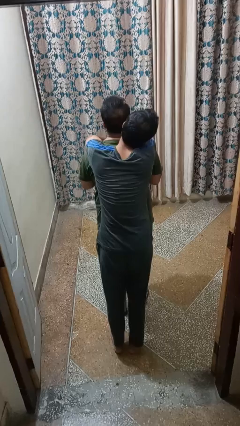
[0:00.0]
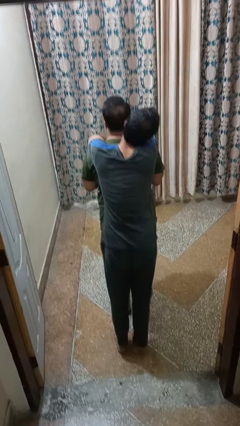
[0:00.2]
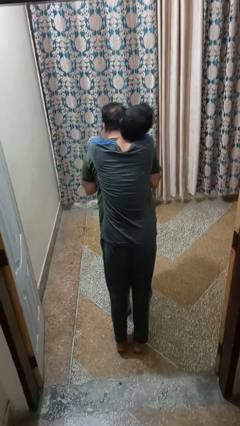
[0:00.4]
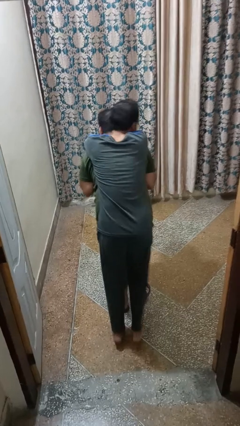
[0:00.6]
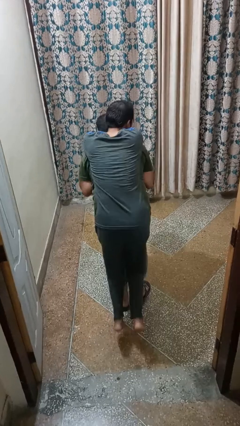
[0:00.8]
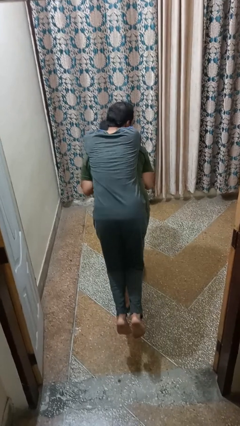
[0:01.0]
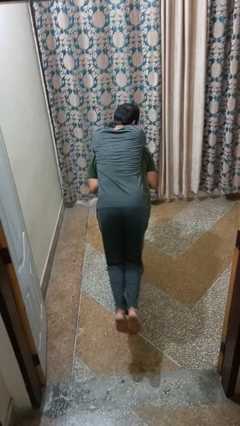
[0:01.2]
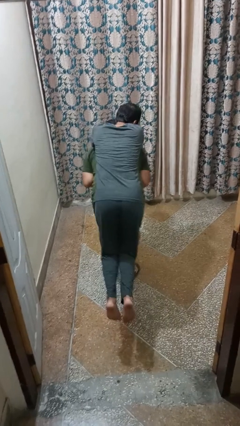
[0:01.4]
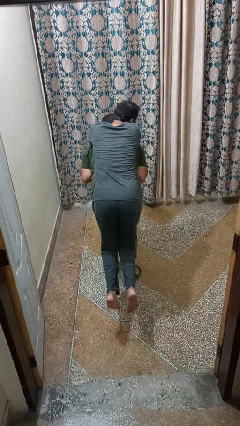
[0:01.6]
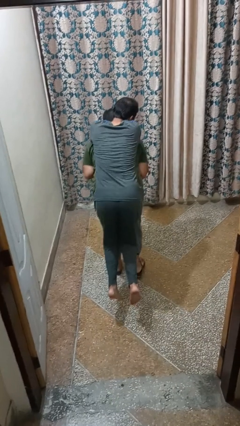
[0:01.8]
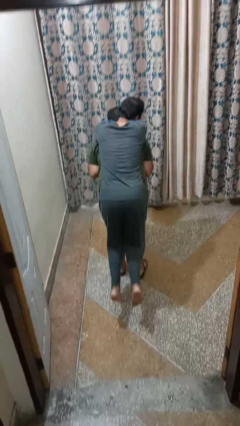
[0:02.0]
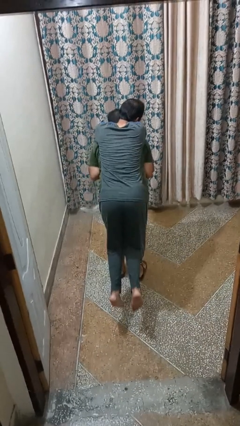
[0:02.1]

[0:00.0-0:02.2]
person carries person on back

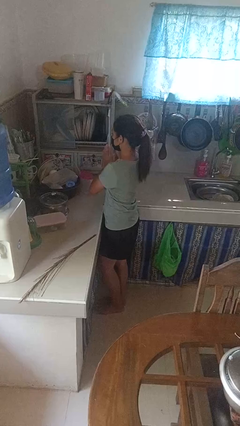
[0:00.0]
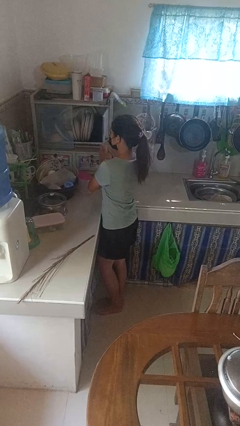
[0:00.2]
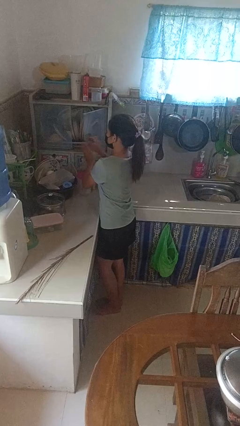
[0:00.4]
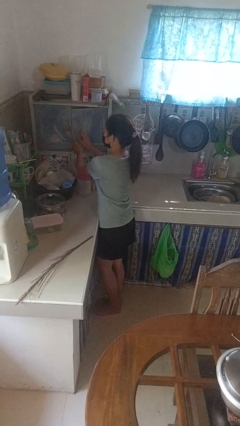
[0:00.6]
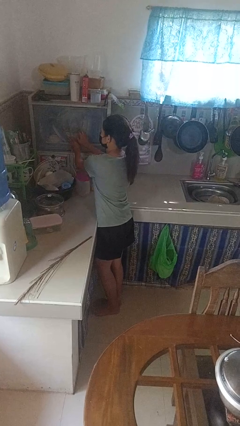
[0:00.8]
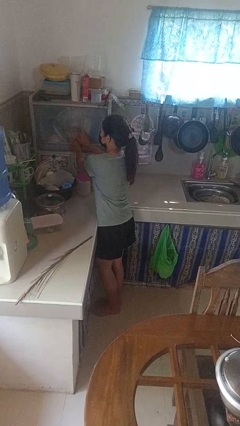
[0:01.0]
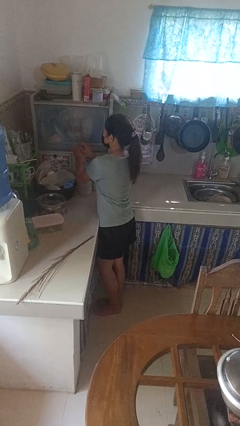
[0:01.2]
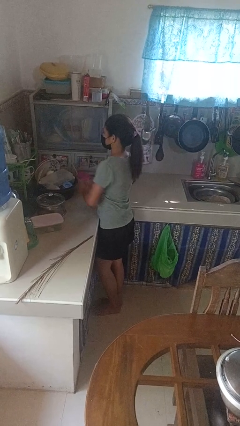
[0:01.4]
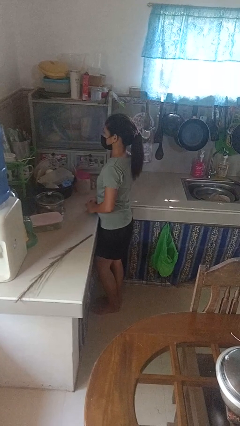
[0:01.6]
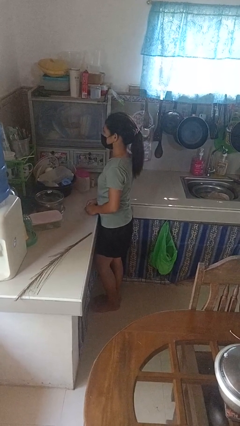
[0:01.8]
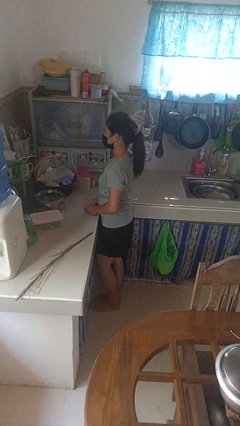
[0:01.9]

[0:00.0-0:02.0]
person closes kitchen drawer

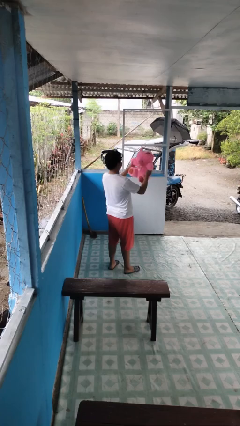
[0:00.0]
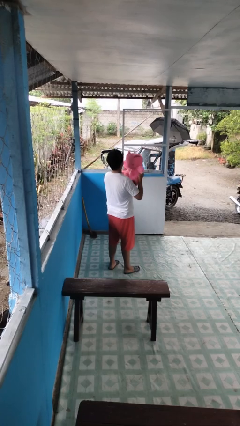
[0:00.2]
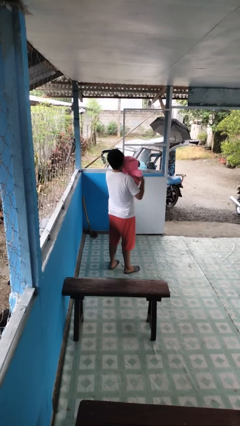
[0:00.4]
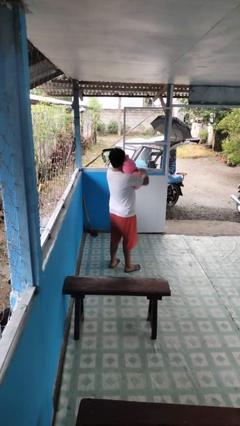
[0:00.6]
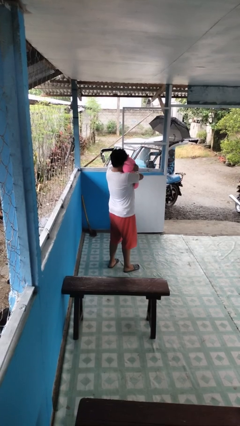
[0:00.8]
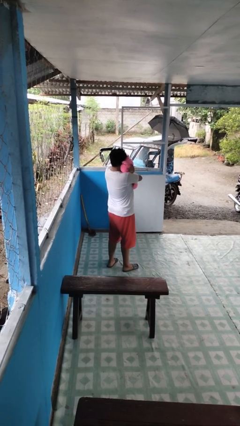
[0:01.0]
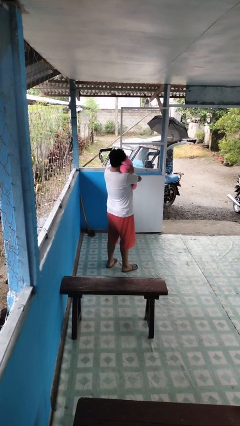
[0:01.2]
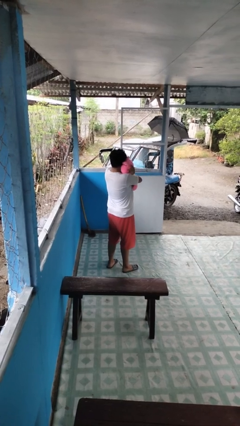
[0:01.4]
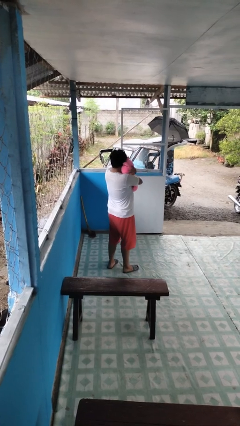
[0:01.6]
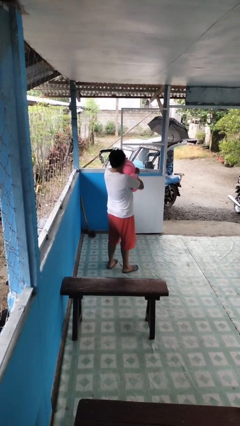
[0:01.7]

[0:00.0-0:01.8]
person hugs stuffed animal

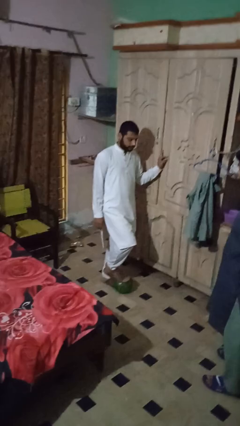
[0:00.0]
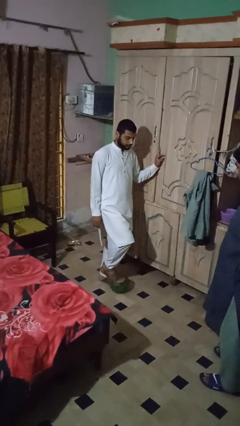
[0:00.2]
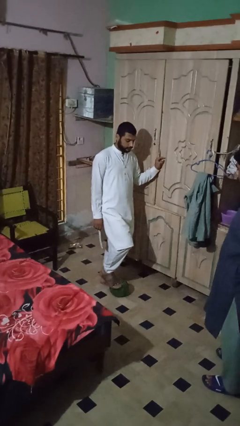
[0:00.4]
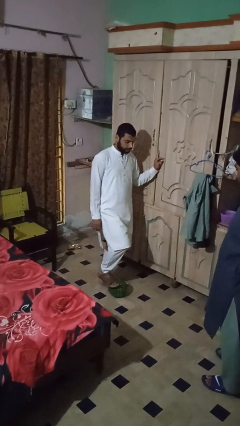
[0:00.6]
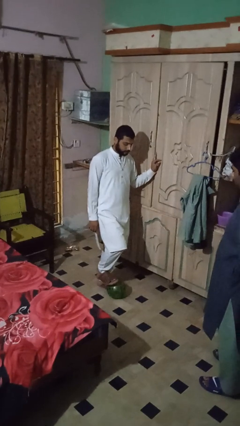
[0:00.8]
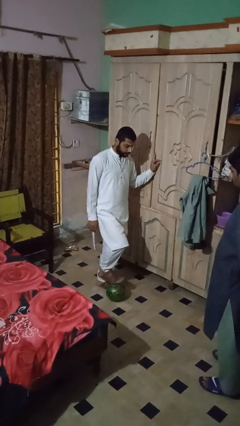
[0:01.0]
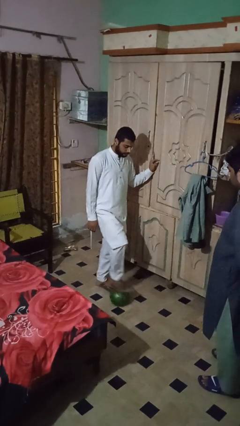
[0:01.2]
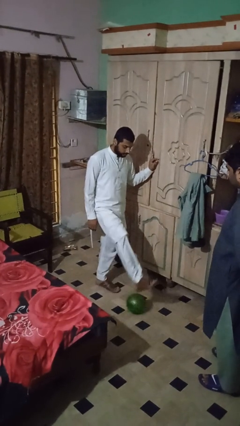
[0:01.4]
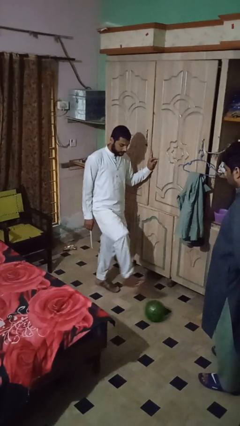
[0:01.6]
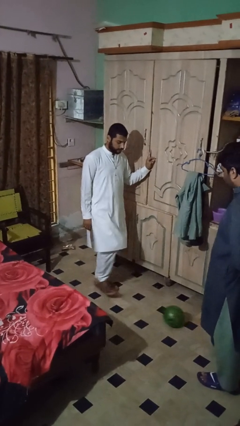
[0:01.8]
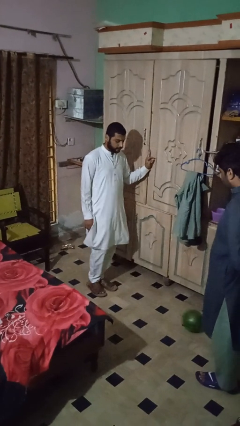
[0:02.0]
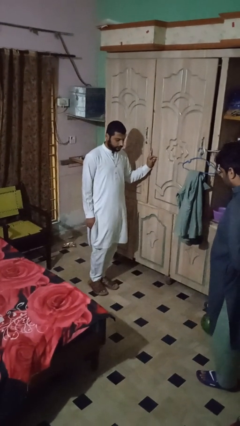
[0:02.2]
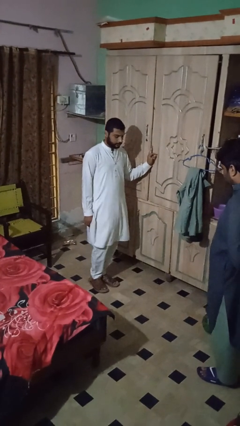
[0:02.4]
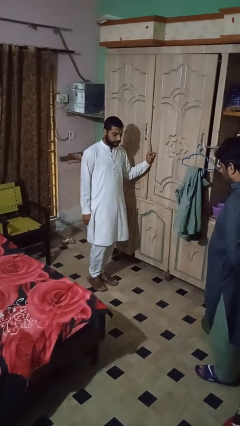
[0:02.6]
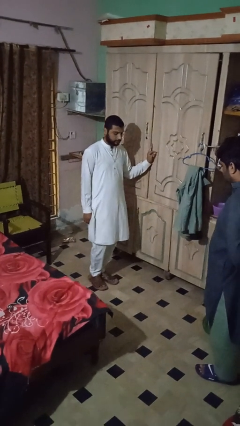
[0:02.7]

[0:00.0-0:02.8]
person kicks object to person

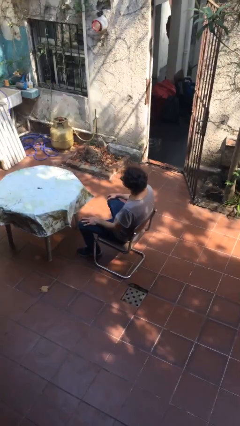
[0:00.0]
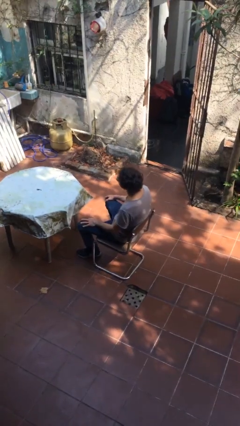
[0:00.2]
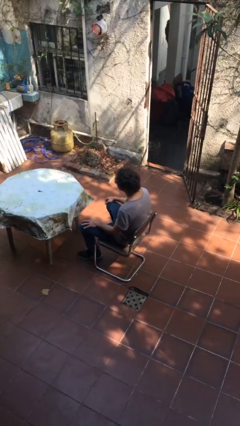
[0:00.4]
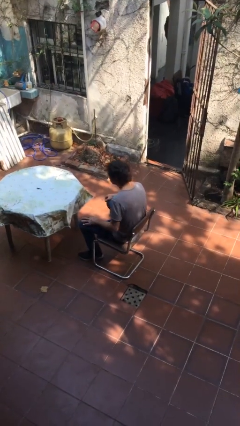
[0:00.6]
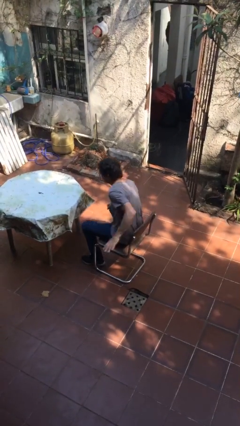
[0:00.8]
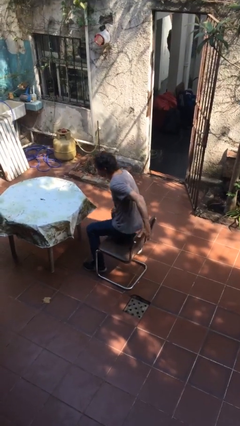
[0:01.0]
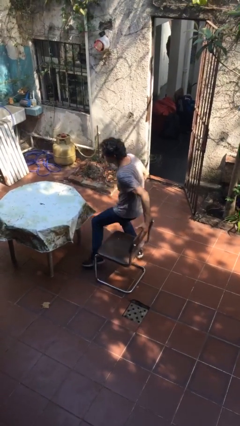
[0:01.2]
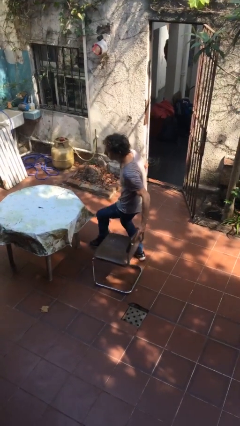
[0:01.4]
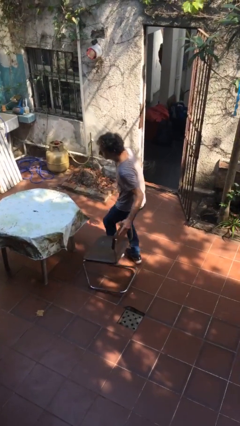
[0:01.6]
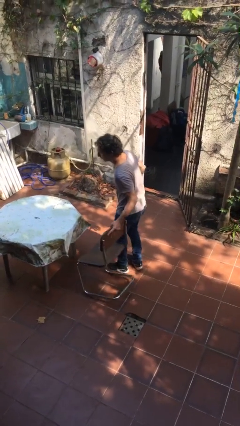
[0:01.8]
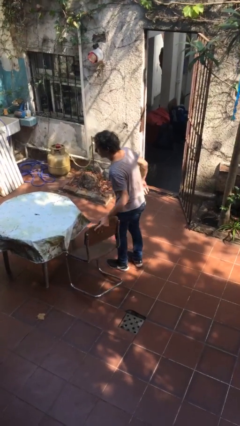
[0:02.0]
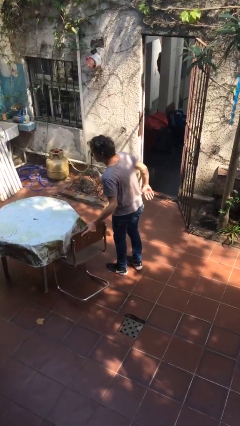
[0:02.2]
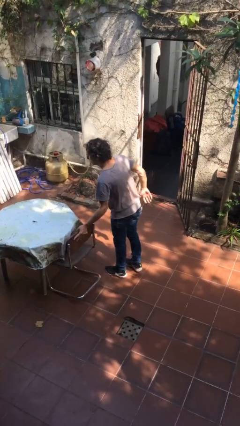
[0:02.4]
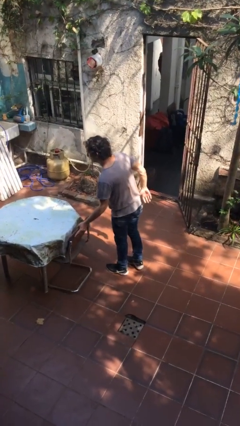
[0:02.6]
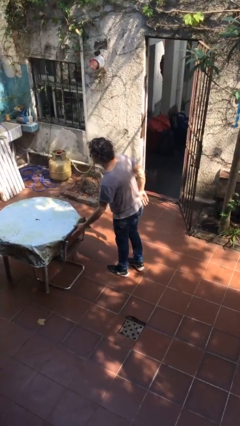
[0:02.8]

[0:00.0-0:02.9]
person stands up

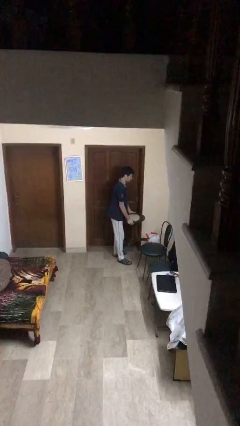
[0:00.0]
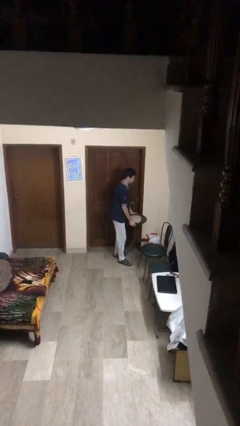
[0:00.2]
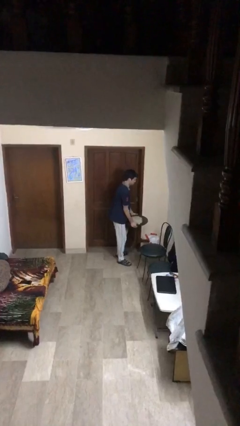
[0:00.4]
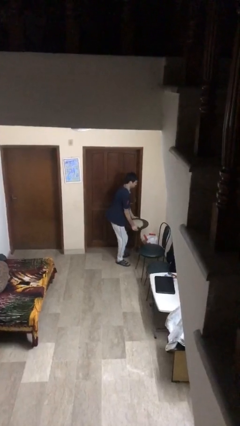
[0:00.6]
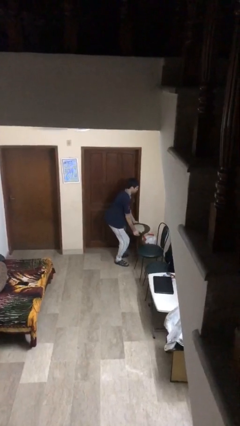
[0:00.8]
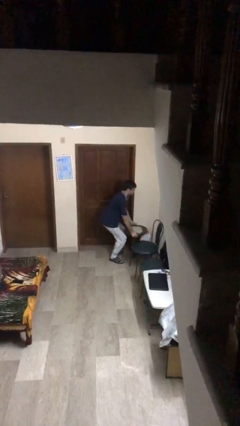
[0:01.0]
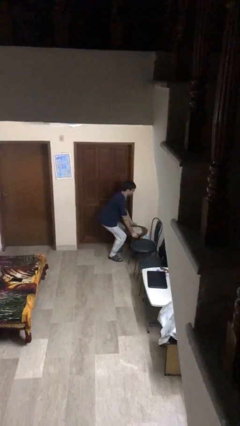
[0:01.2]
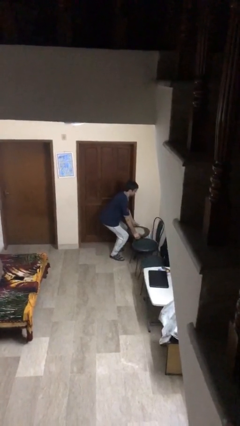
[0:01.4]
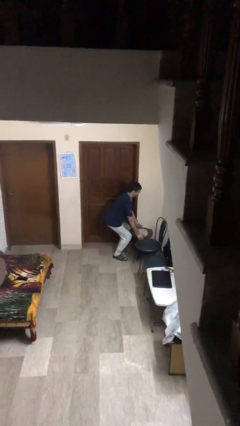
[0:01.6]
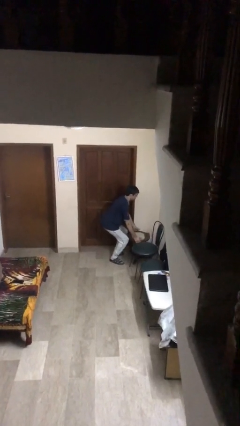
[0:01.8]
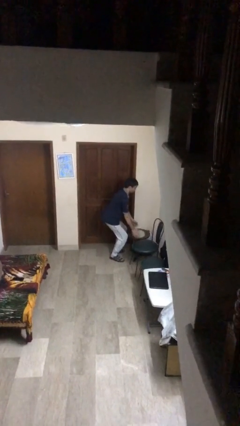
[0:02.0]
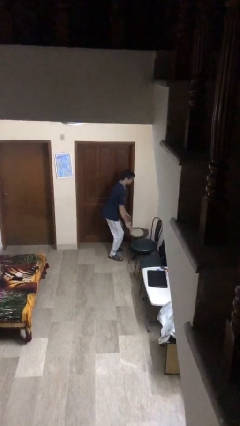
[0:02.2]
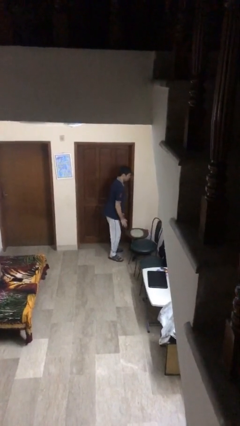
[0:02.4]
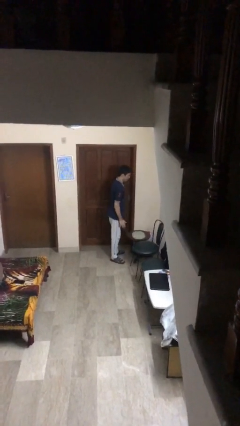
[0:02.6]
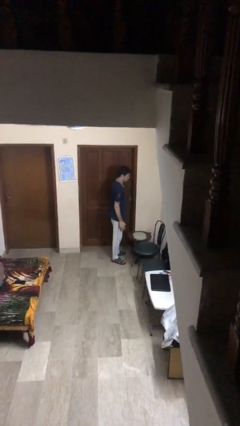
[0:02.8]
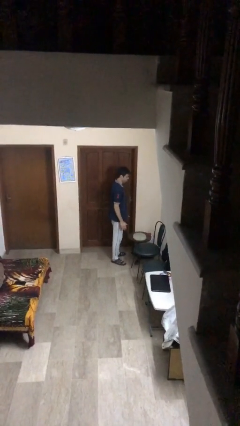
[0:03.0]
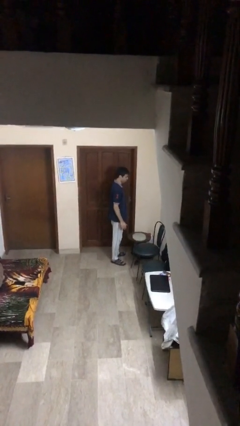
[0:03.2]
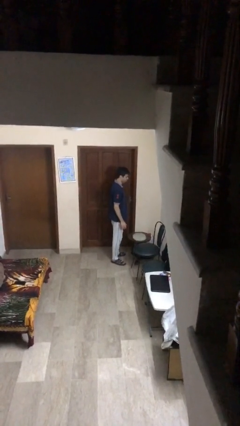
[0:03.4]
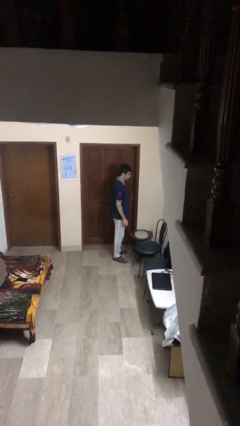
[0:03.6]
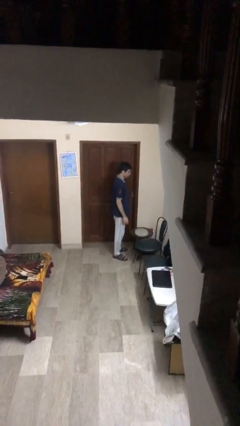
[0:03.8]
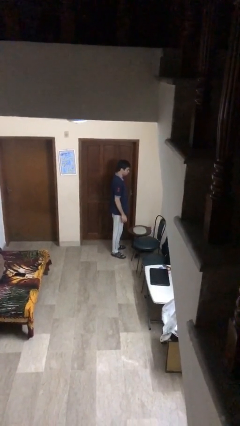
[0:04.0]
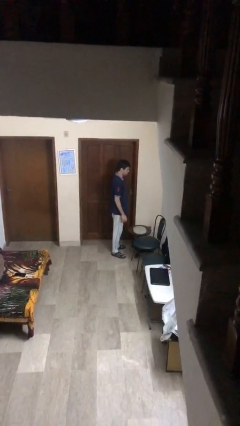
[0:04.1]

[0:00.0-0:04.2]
person puts down object on floor

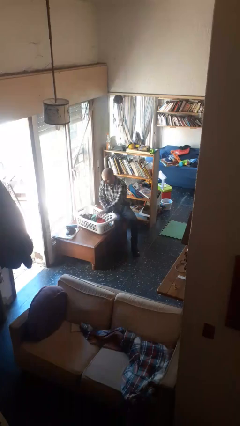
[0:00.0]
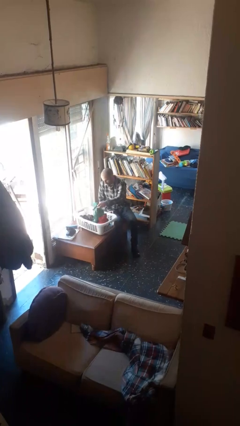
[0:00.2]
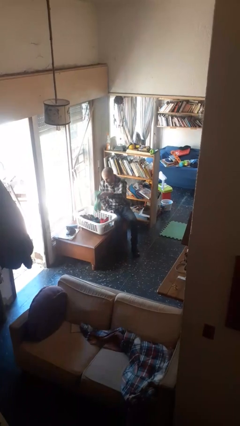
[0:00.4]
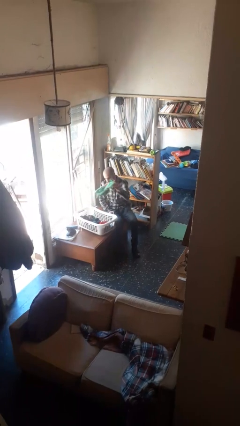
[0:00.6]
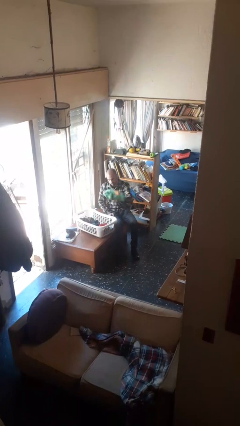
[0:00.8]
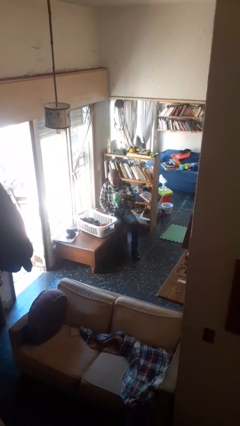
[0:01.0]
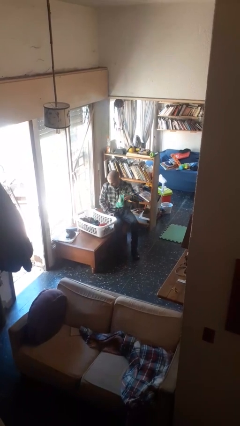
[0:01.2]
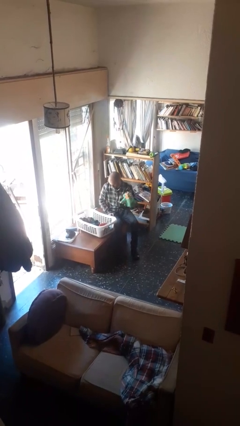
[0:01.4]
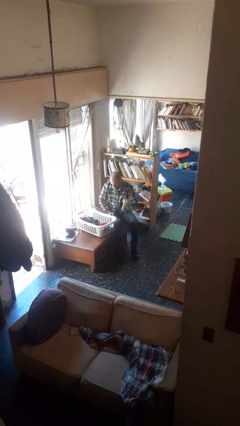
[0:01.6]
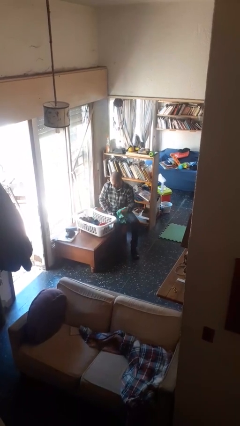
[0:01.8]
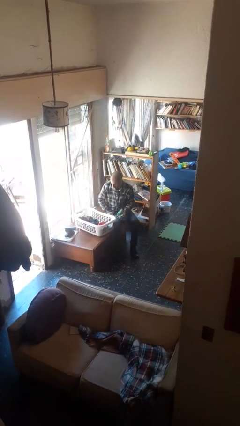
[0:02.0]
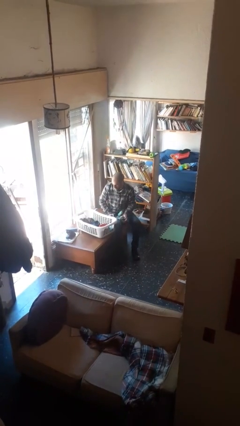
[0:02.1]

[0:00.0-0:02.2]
person takes object from basket
